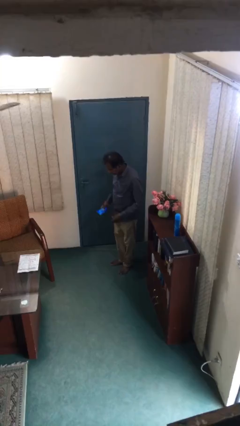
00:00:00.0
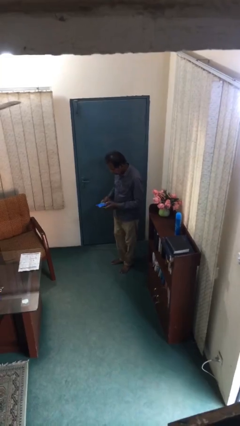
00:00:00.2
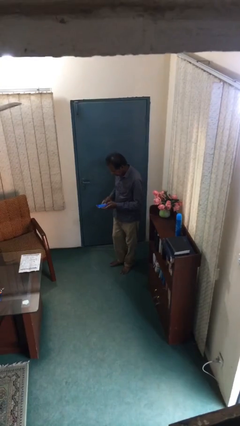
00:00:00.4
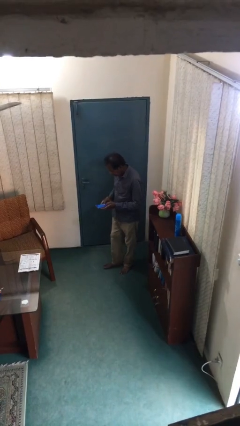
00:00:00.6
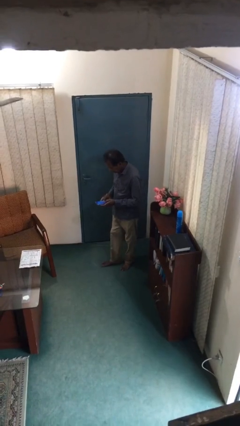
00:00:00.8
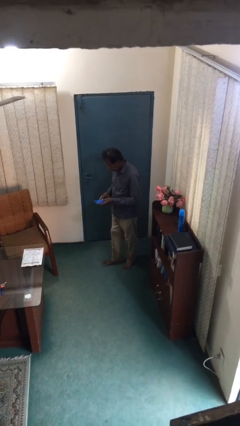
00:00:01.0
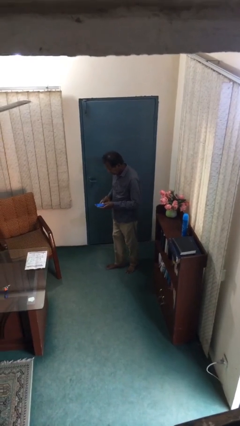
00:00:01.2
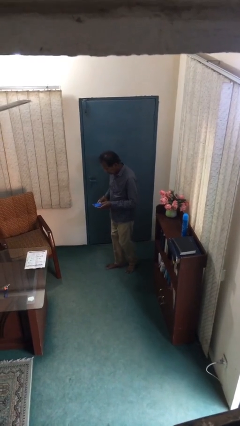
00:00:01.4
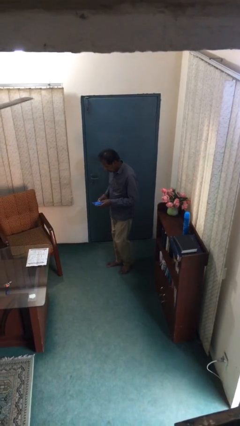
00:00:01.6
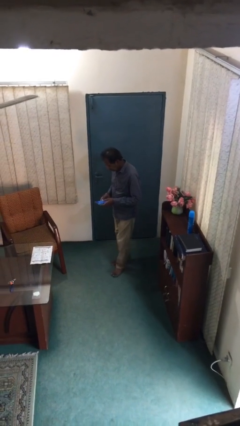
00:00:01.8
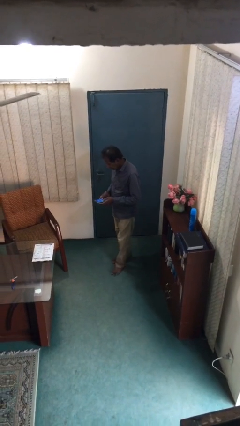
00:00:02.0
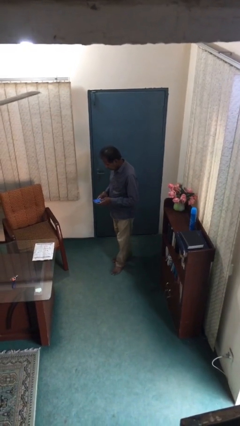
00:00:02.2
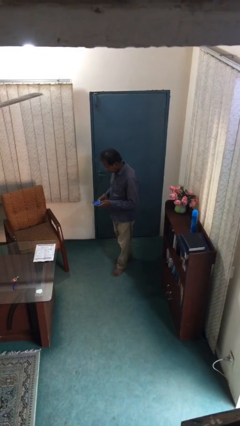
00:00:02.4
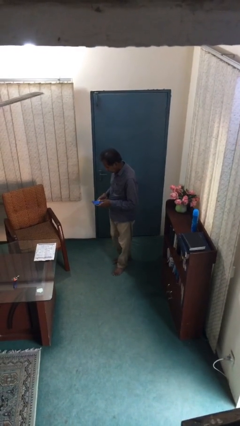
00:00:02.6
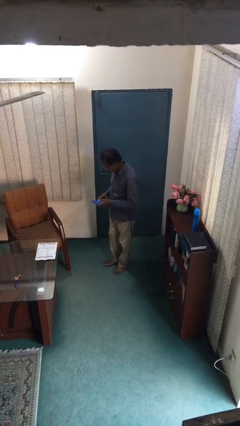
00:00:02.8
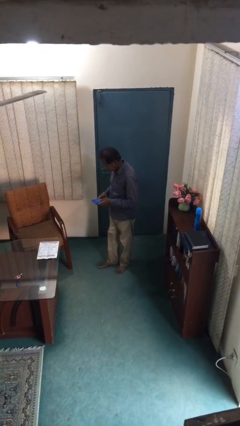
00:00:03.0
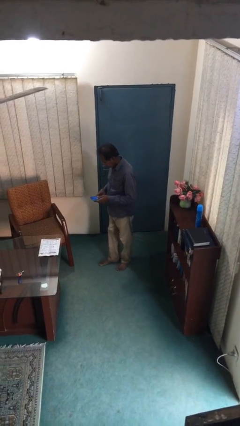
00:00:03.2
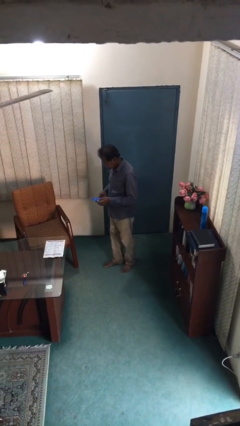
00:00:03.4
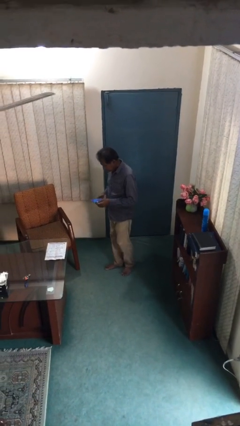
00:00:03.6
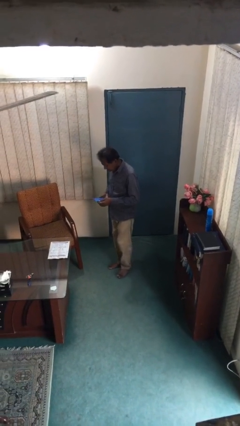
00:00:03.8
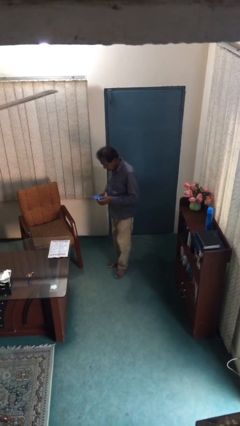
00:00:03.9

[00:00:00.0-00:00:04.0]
person texts on phone

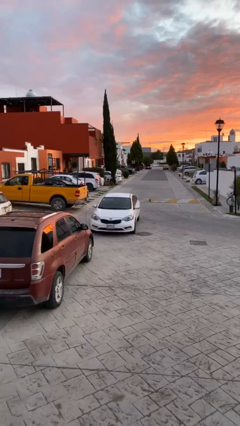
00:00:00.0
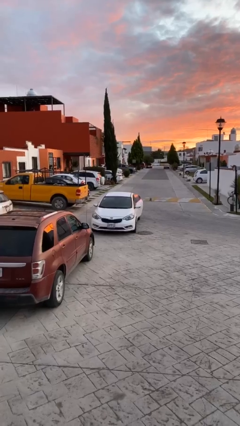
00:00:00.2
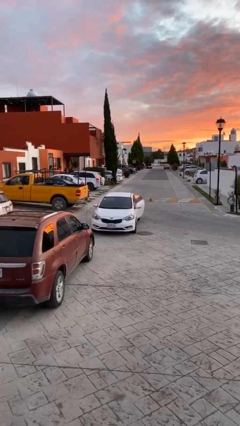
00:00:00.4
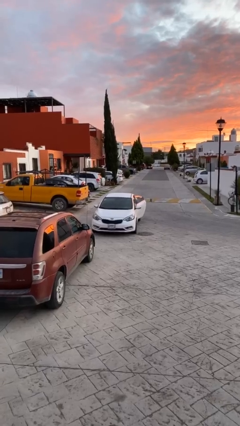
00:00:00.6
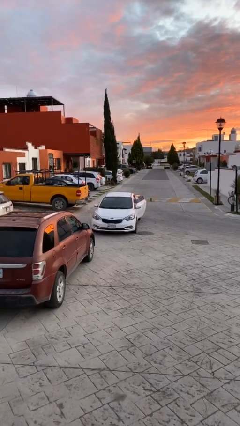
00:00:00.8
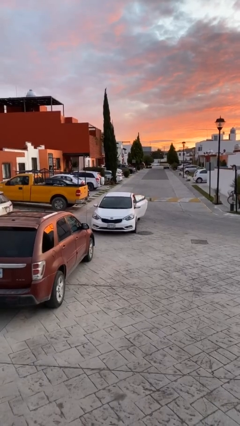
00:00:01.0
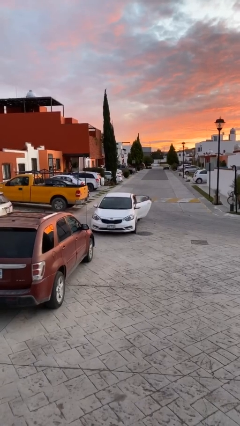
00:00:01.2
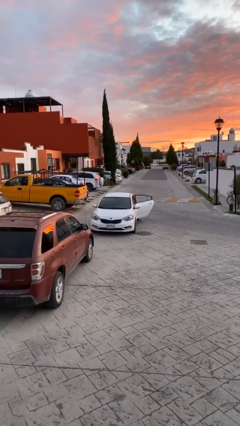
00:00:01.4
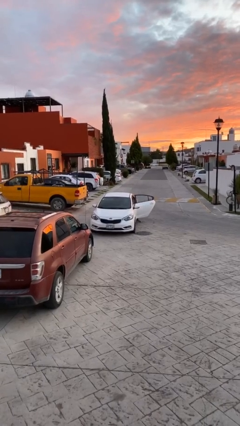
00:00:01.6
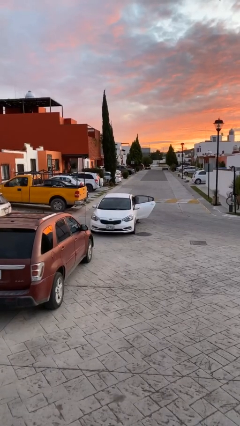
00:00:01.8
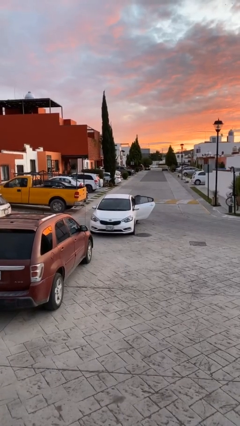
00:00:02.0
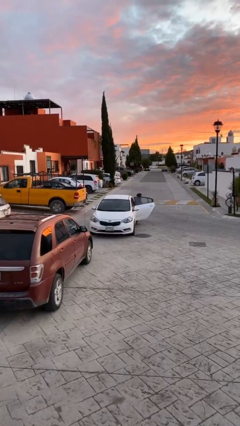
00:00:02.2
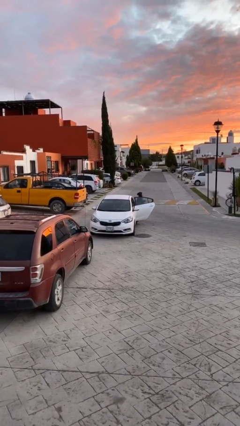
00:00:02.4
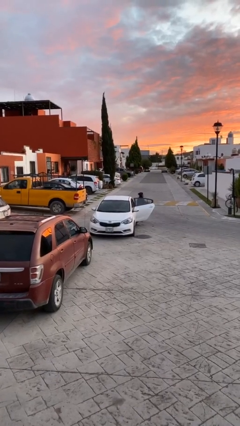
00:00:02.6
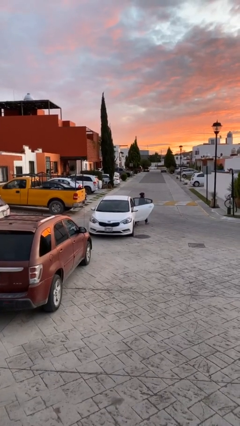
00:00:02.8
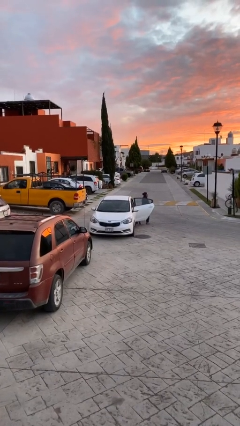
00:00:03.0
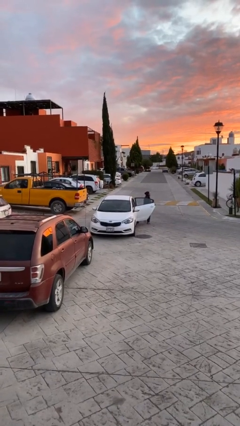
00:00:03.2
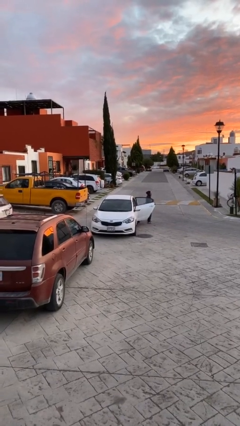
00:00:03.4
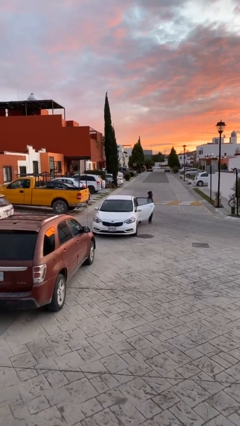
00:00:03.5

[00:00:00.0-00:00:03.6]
car drops off person

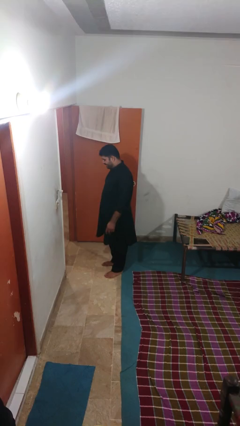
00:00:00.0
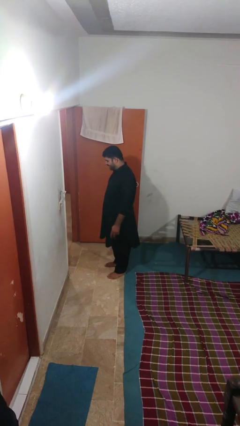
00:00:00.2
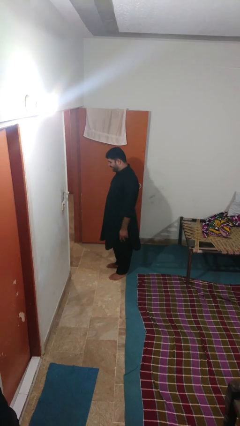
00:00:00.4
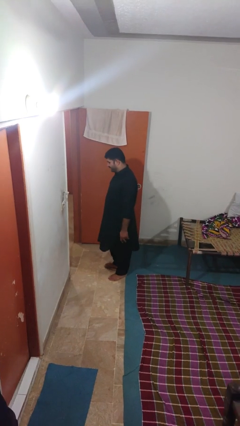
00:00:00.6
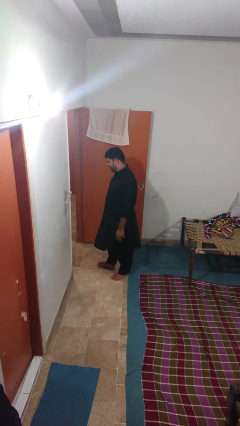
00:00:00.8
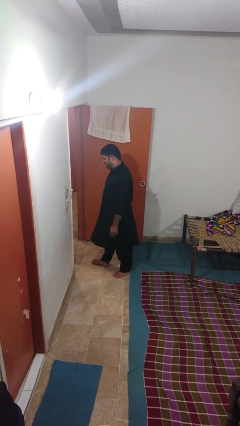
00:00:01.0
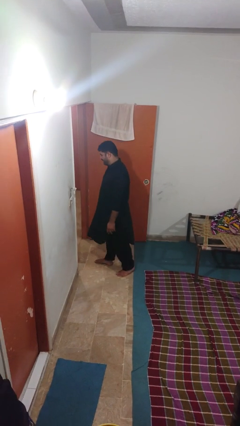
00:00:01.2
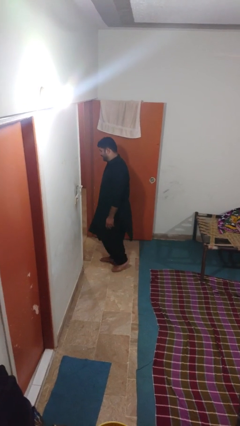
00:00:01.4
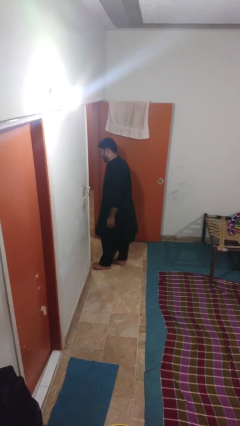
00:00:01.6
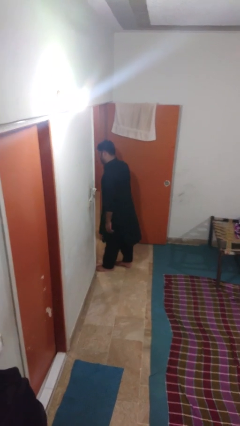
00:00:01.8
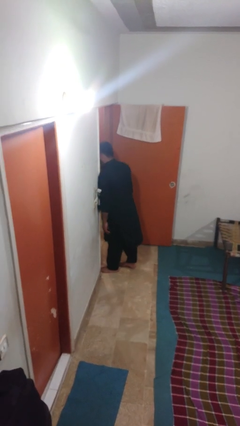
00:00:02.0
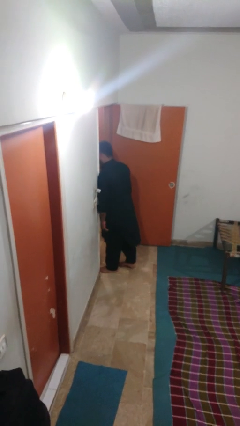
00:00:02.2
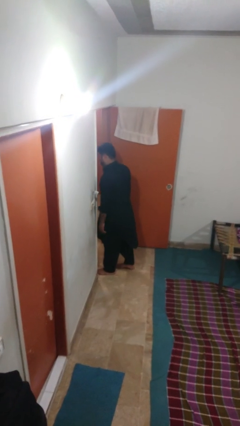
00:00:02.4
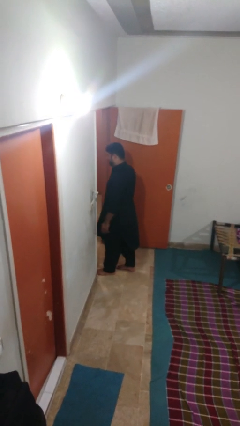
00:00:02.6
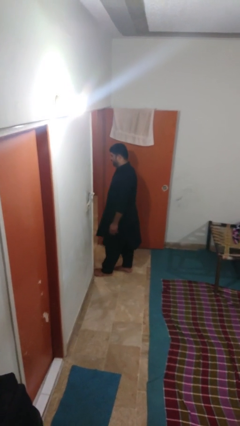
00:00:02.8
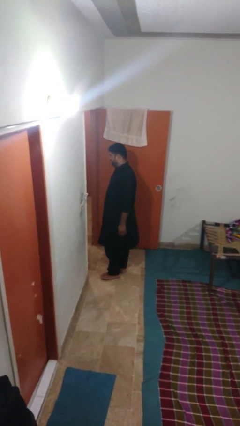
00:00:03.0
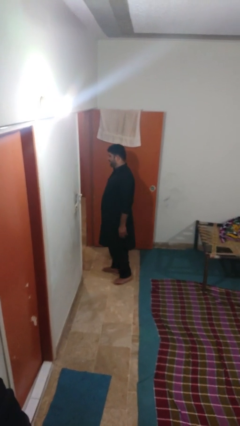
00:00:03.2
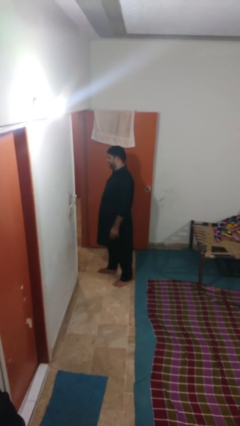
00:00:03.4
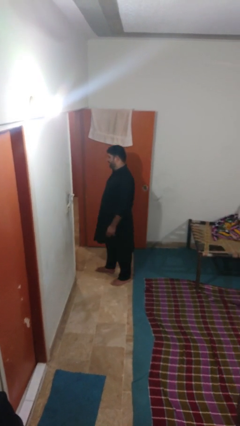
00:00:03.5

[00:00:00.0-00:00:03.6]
person bumps into wall

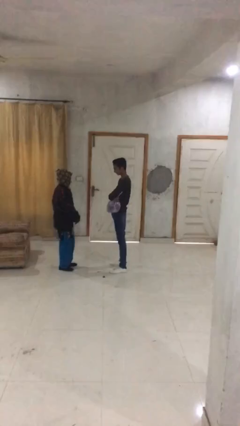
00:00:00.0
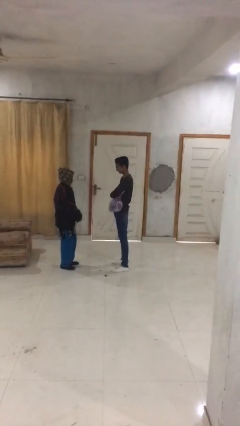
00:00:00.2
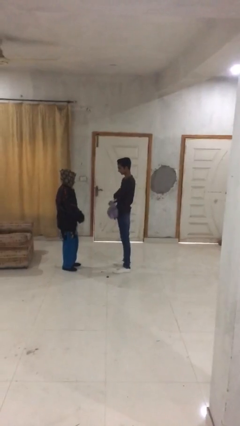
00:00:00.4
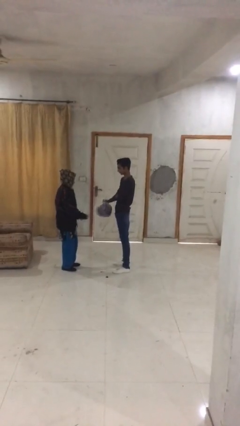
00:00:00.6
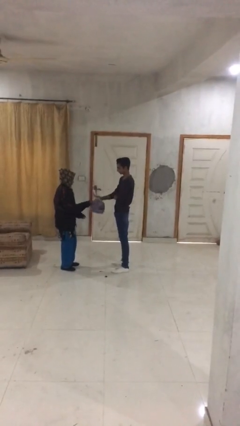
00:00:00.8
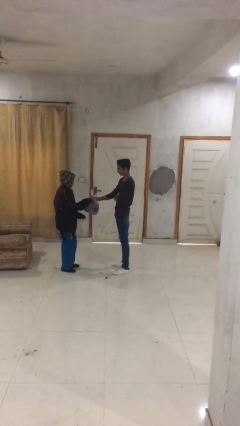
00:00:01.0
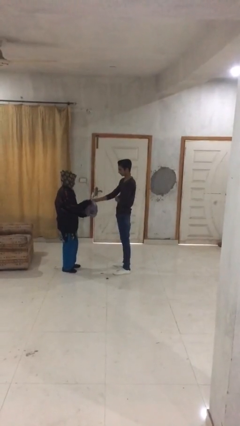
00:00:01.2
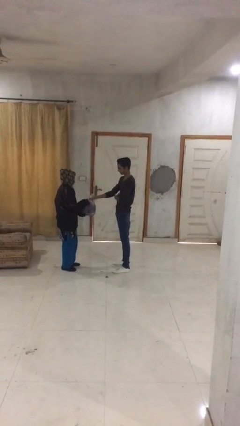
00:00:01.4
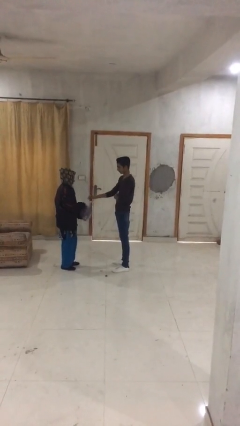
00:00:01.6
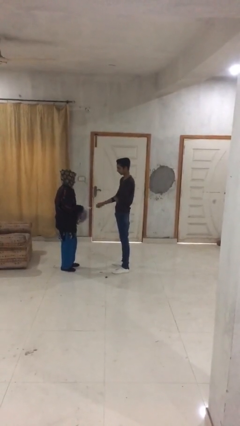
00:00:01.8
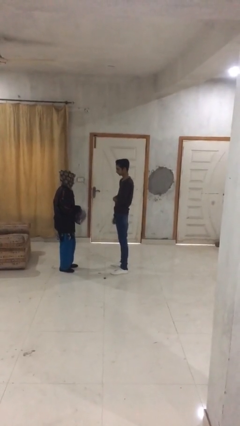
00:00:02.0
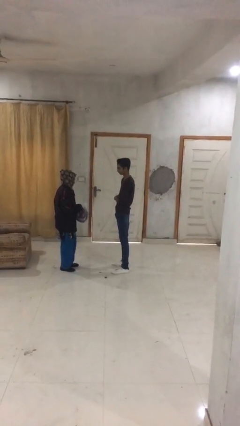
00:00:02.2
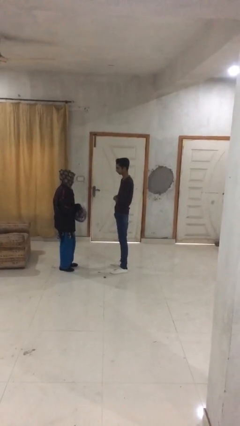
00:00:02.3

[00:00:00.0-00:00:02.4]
person transfers object to person

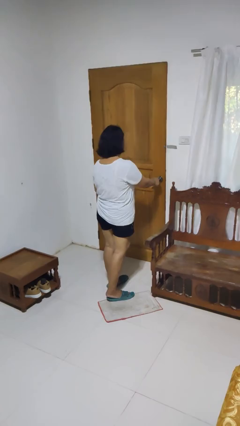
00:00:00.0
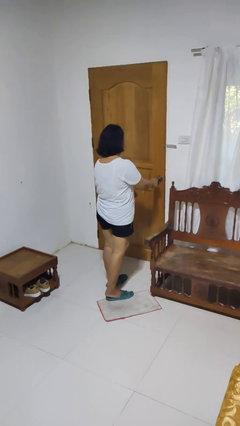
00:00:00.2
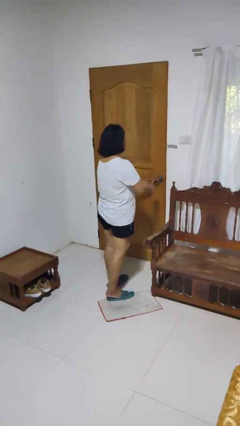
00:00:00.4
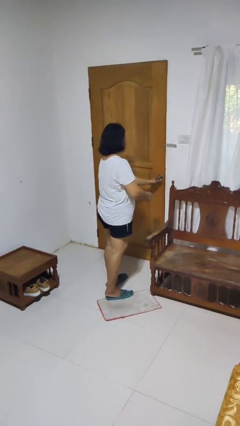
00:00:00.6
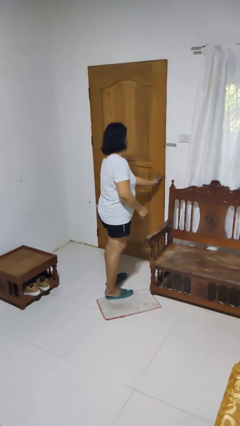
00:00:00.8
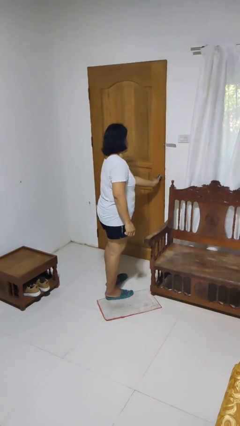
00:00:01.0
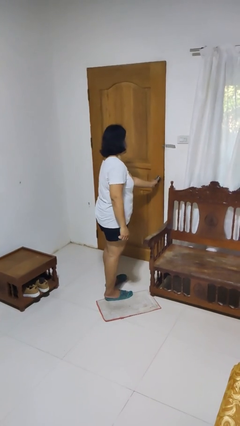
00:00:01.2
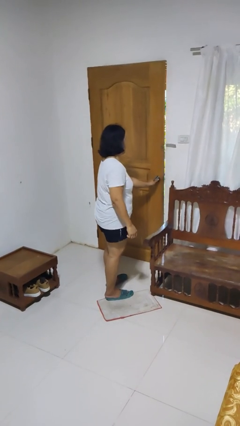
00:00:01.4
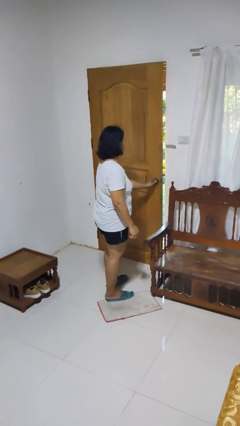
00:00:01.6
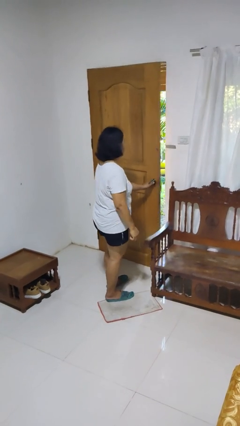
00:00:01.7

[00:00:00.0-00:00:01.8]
person opens facility door

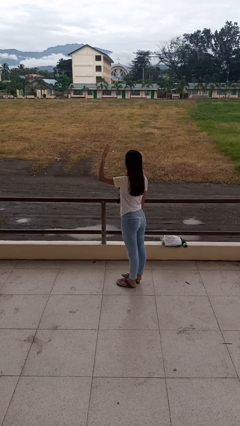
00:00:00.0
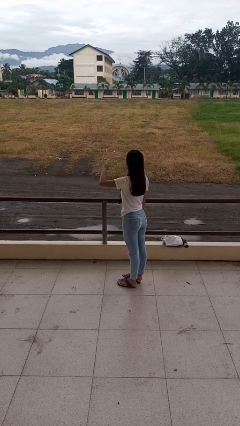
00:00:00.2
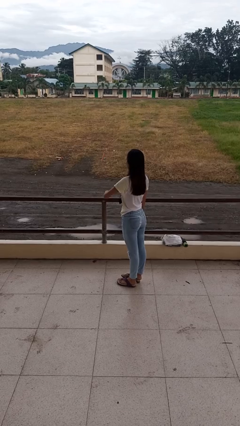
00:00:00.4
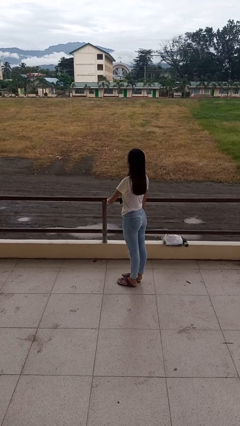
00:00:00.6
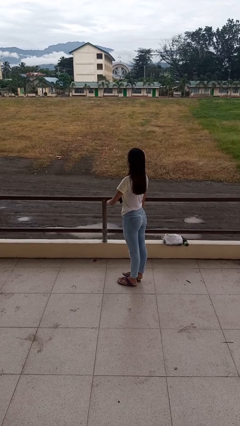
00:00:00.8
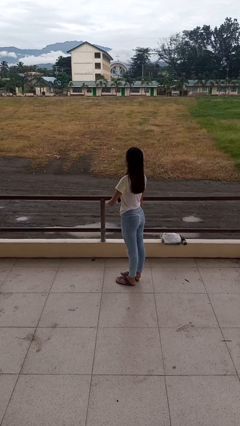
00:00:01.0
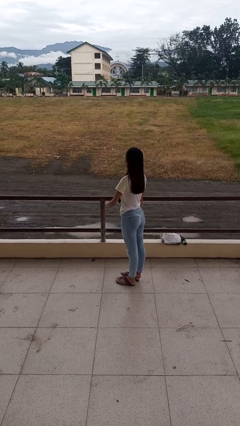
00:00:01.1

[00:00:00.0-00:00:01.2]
person gestures swipe down

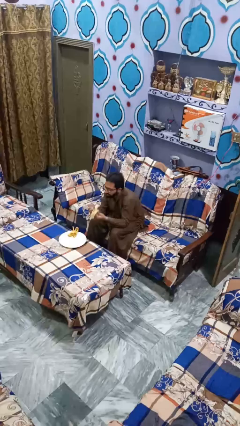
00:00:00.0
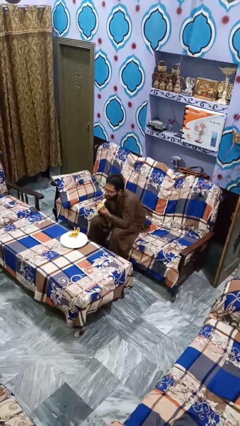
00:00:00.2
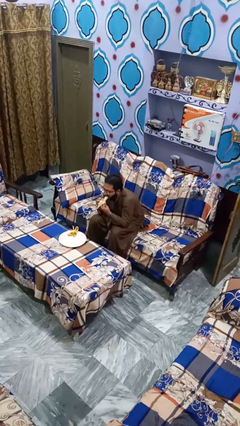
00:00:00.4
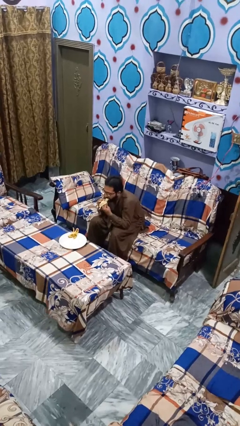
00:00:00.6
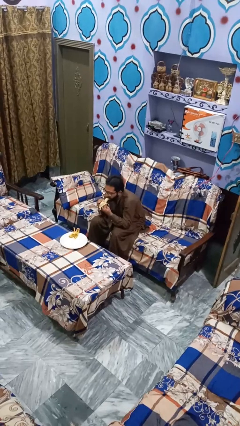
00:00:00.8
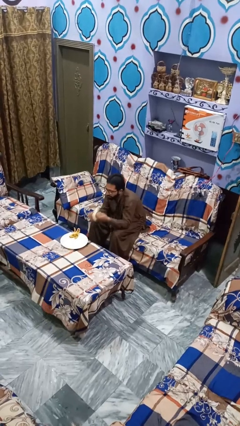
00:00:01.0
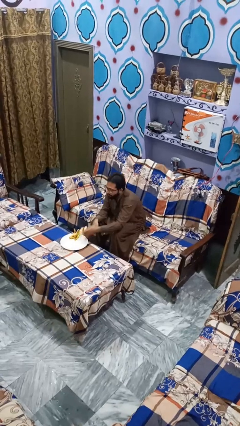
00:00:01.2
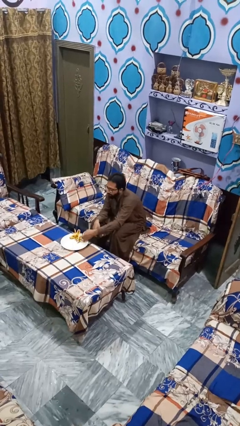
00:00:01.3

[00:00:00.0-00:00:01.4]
person eats banana
